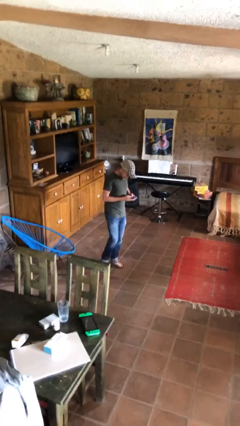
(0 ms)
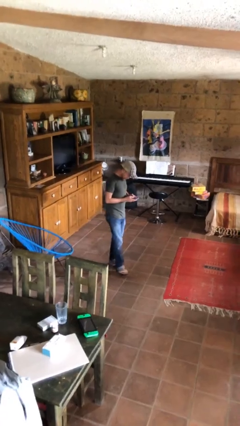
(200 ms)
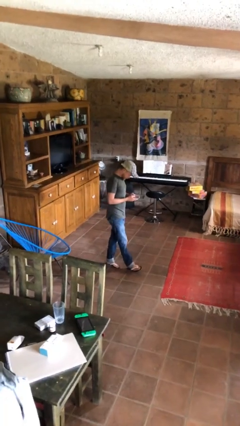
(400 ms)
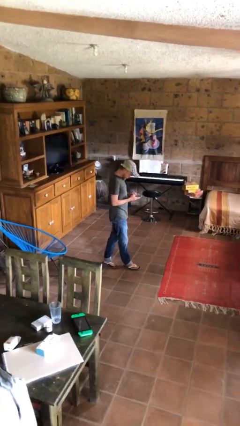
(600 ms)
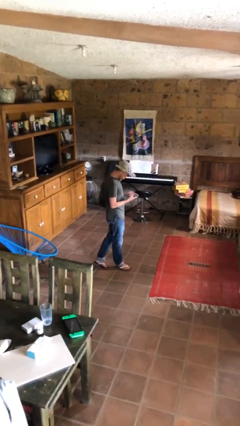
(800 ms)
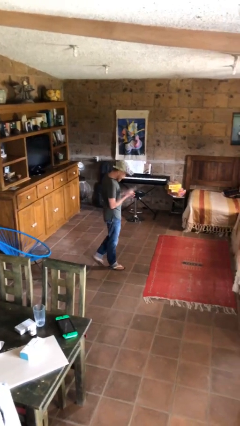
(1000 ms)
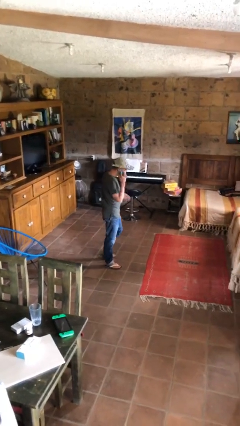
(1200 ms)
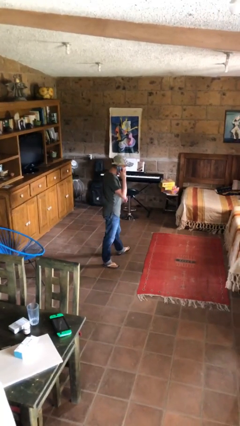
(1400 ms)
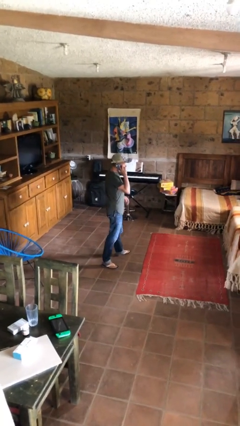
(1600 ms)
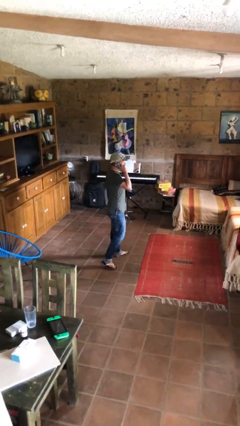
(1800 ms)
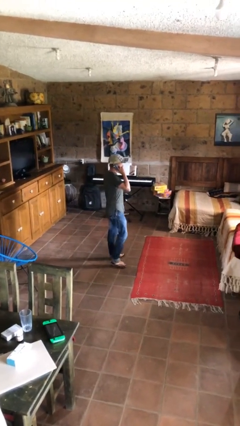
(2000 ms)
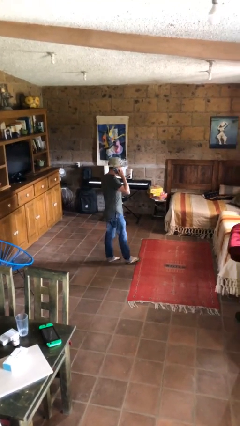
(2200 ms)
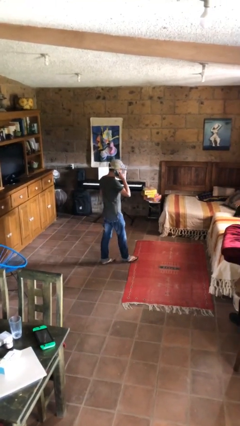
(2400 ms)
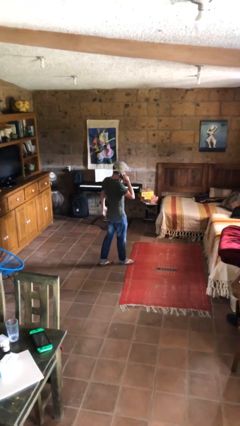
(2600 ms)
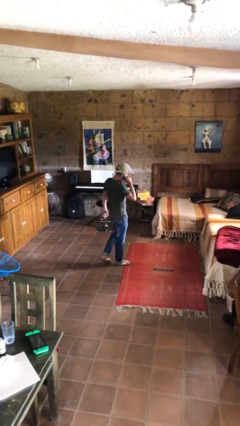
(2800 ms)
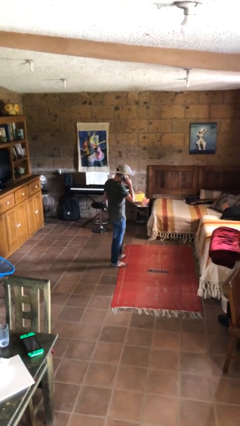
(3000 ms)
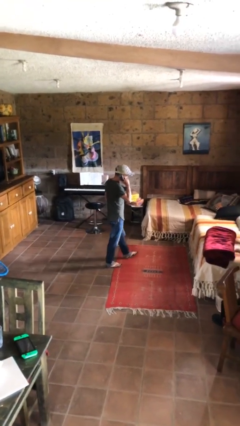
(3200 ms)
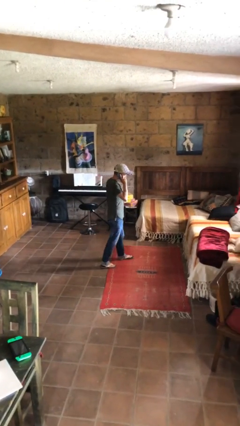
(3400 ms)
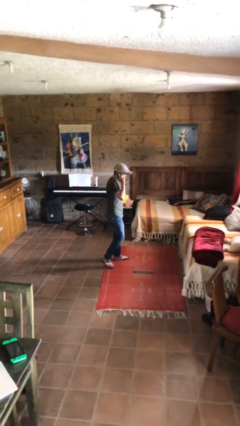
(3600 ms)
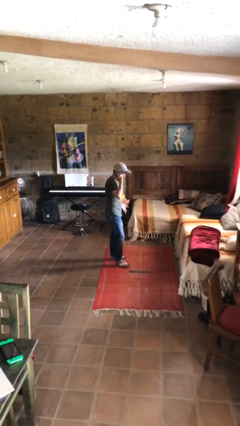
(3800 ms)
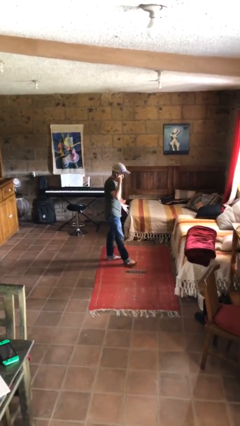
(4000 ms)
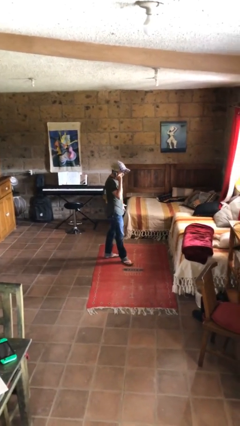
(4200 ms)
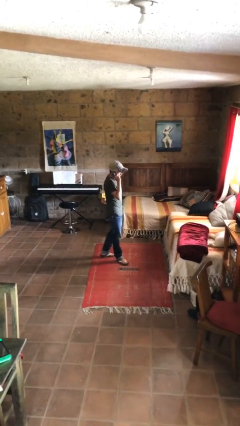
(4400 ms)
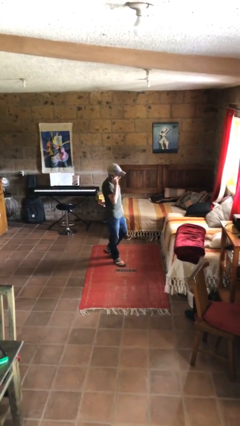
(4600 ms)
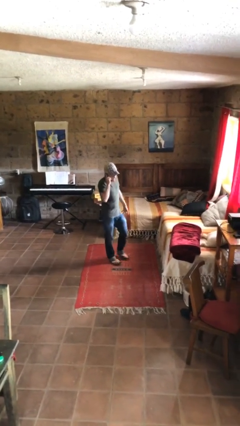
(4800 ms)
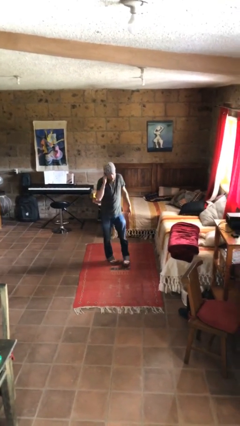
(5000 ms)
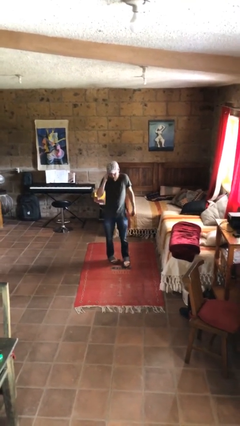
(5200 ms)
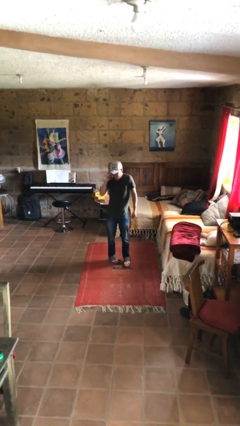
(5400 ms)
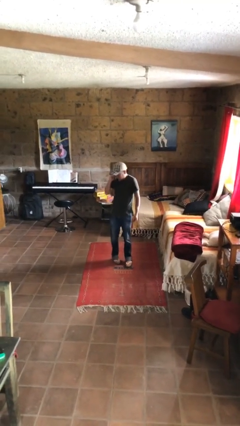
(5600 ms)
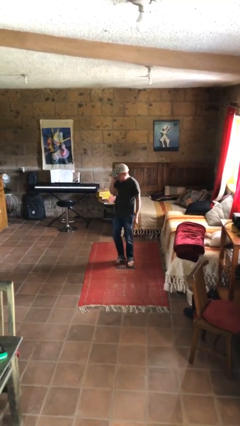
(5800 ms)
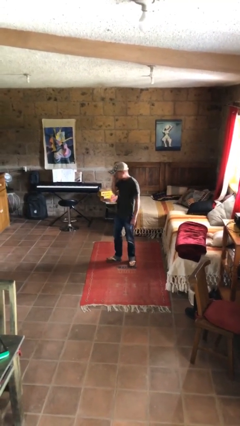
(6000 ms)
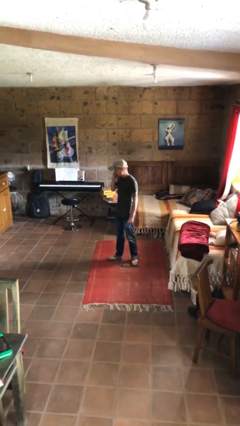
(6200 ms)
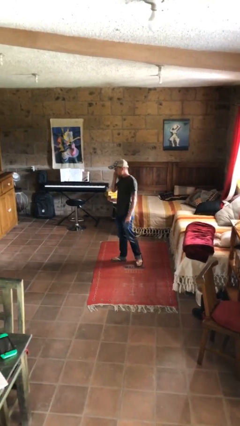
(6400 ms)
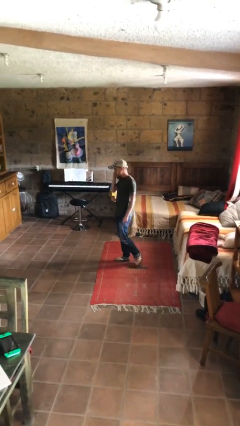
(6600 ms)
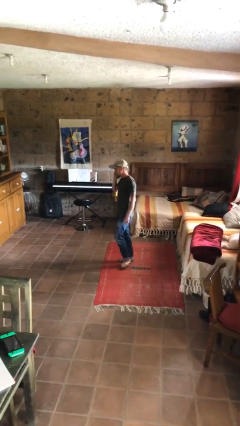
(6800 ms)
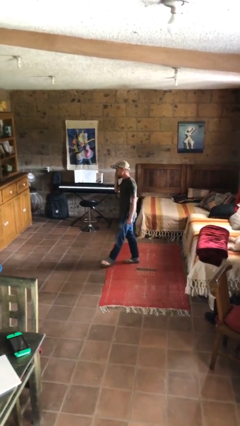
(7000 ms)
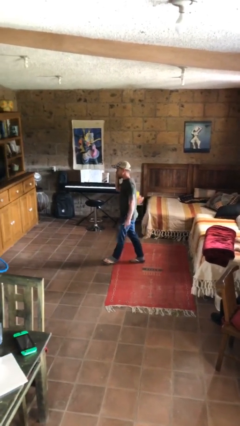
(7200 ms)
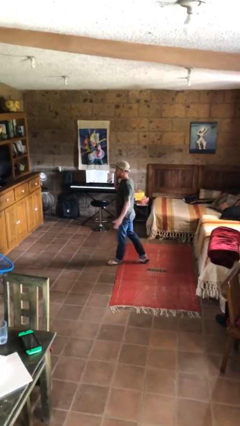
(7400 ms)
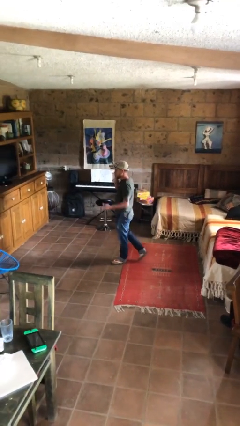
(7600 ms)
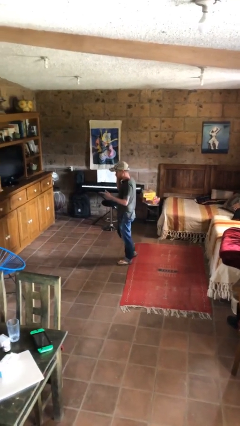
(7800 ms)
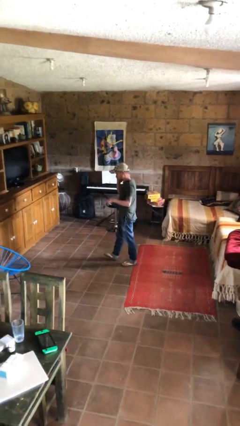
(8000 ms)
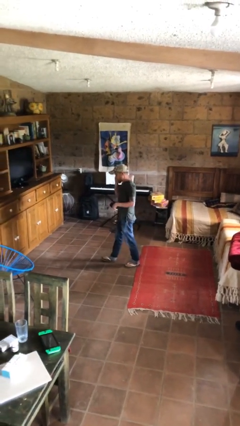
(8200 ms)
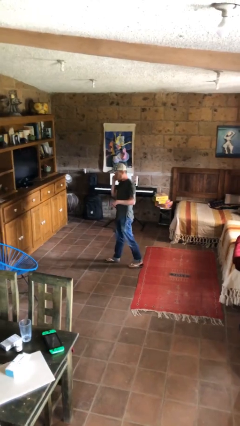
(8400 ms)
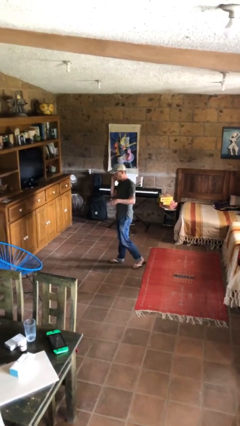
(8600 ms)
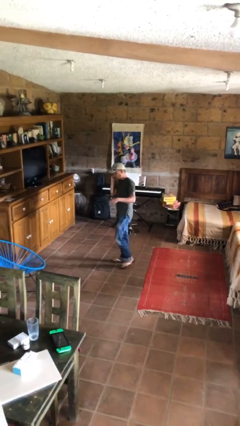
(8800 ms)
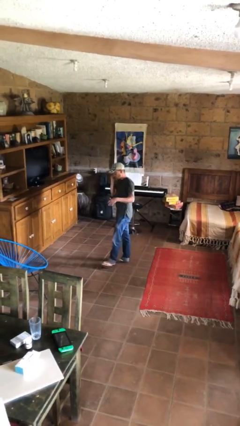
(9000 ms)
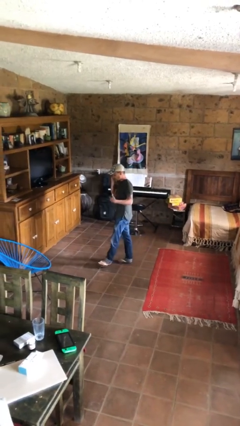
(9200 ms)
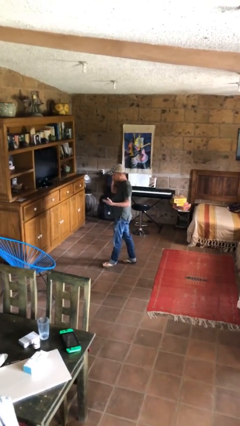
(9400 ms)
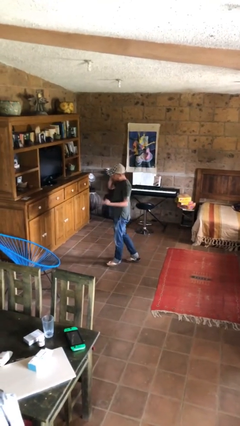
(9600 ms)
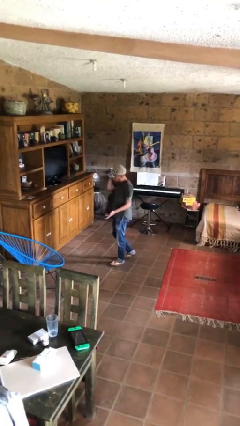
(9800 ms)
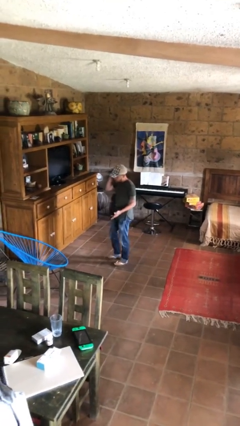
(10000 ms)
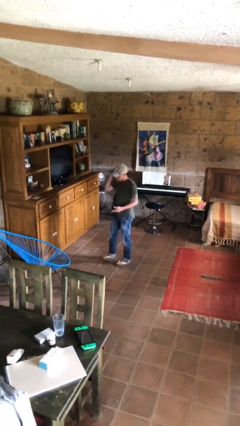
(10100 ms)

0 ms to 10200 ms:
person talks on phone

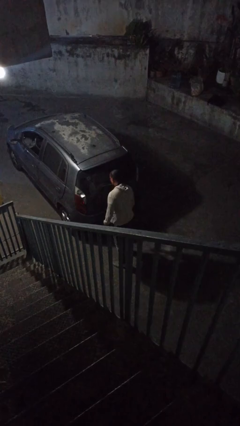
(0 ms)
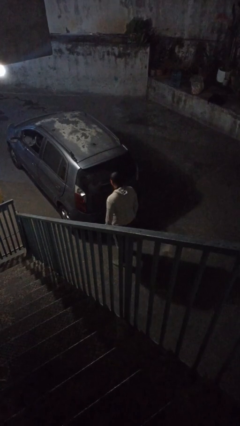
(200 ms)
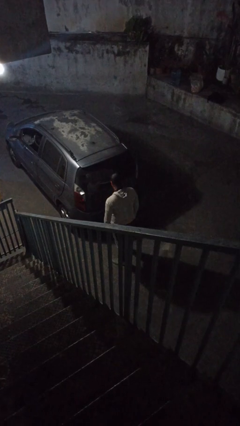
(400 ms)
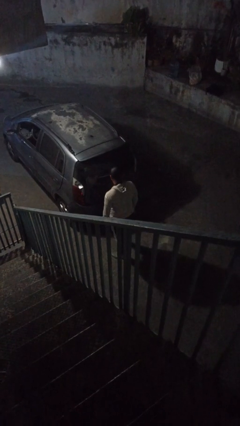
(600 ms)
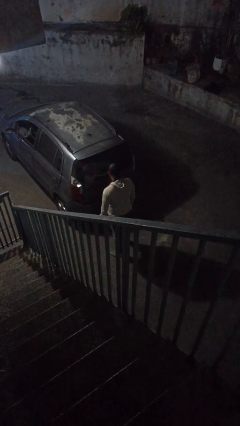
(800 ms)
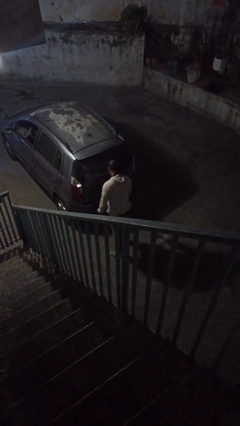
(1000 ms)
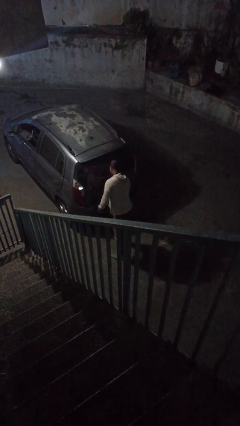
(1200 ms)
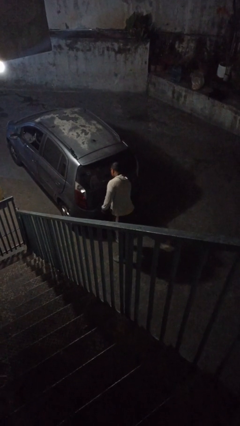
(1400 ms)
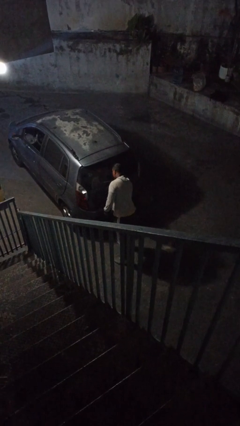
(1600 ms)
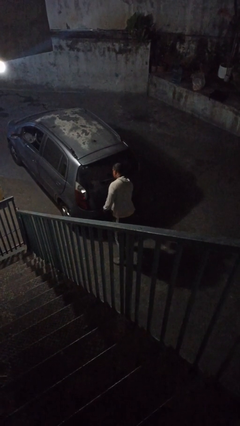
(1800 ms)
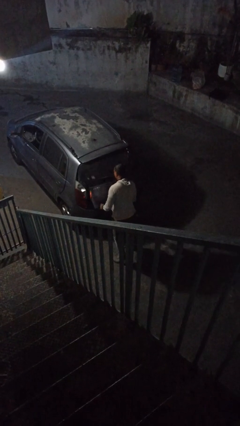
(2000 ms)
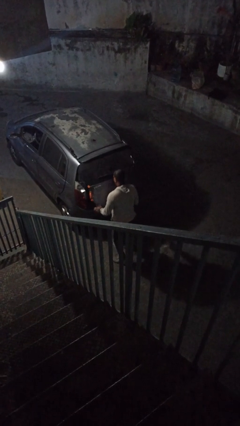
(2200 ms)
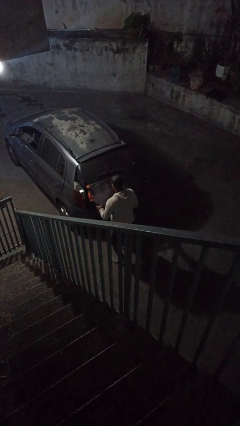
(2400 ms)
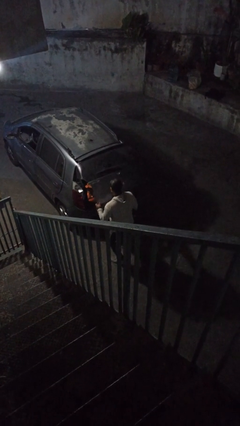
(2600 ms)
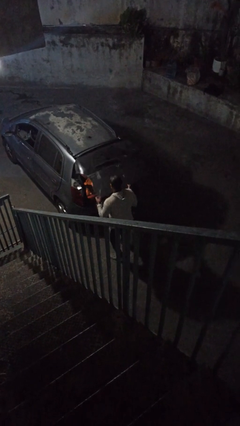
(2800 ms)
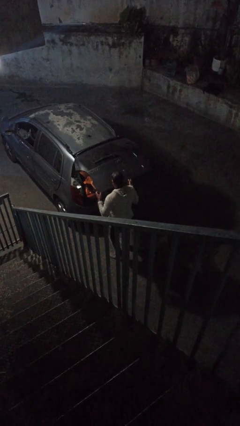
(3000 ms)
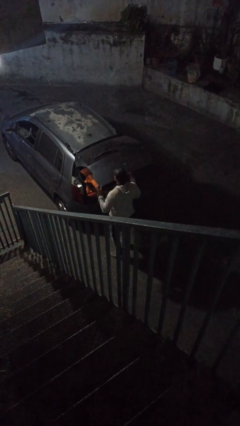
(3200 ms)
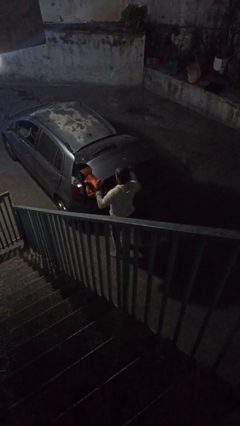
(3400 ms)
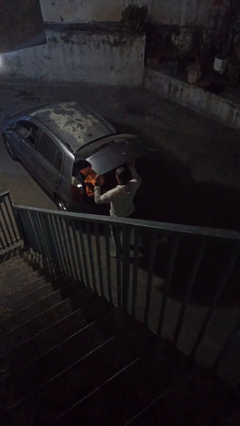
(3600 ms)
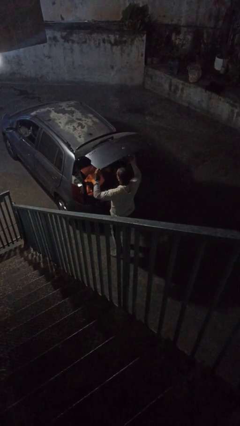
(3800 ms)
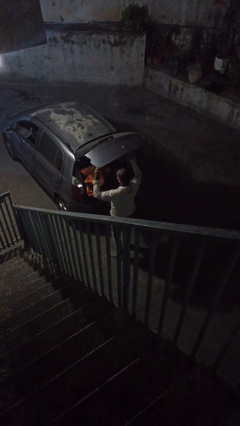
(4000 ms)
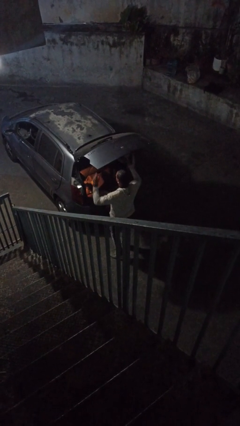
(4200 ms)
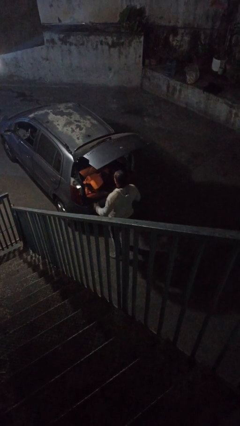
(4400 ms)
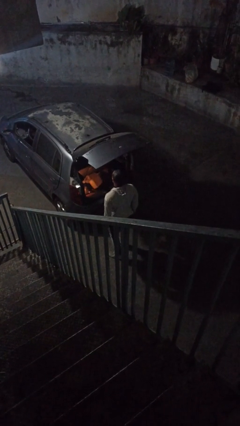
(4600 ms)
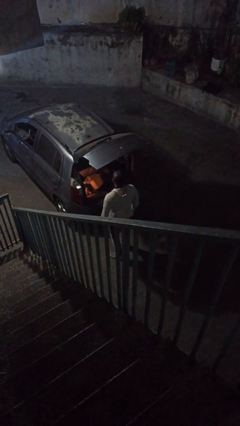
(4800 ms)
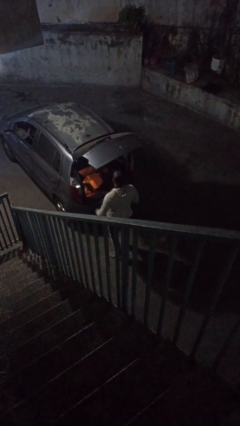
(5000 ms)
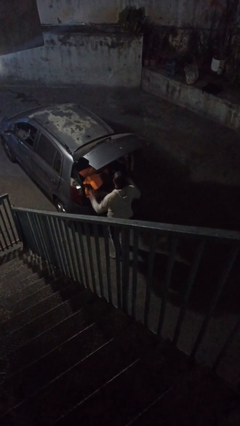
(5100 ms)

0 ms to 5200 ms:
person opens car trunk

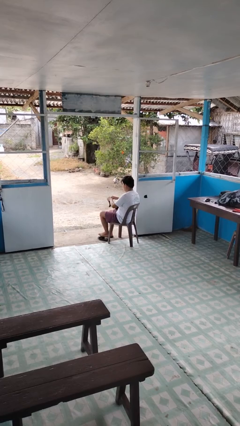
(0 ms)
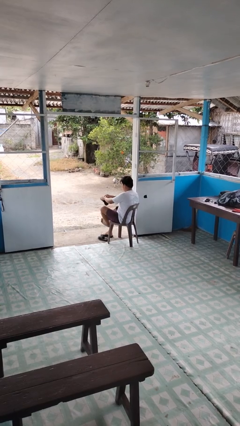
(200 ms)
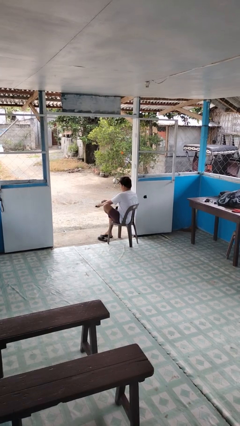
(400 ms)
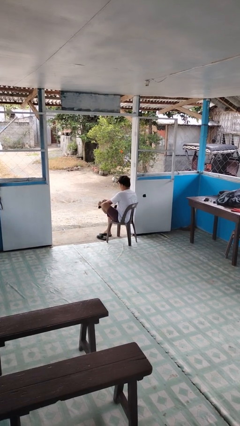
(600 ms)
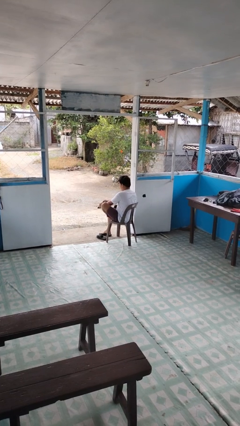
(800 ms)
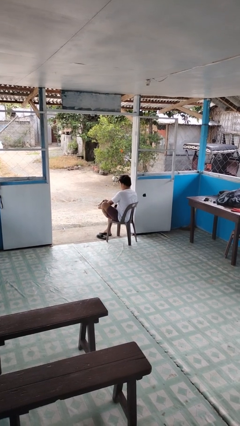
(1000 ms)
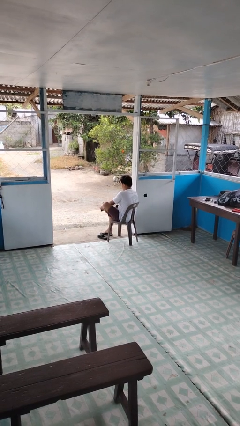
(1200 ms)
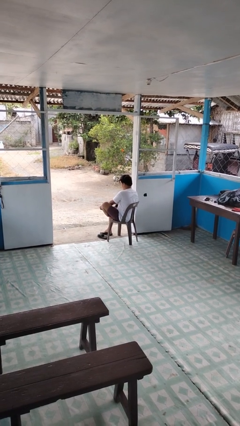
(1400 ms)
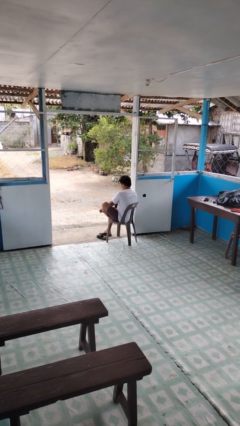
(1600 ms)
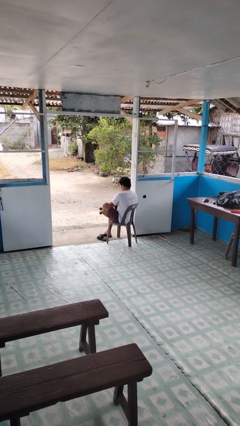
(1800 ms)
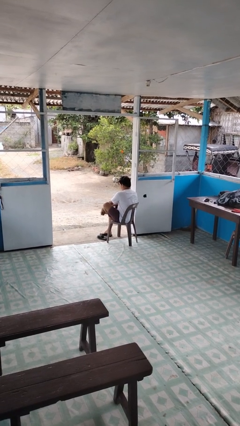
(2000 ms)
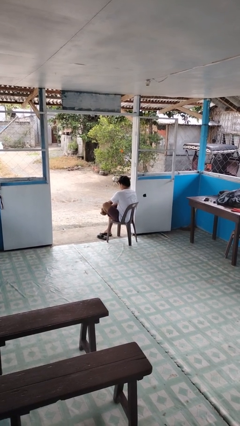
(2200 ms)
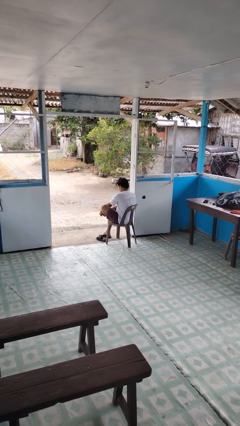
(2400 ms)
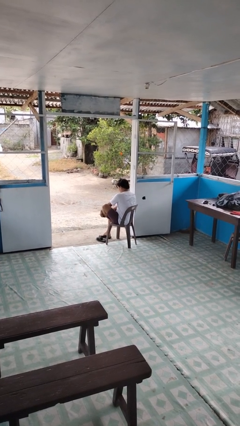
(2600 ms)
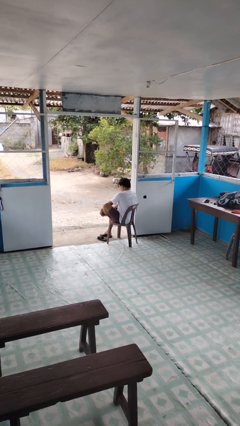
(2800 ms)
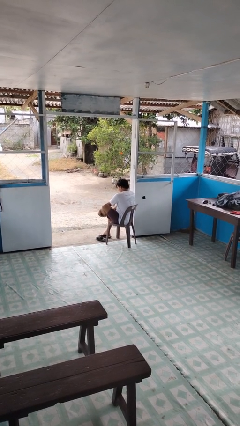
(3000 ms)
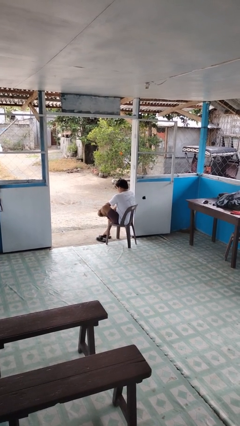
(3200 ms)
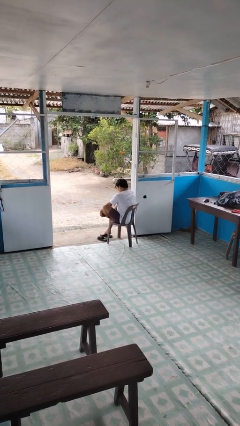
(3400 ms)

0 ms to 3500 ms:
person puts on socks
